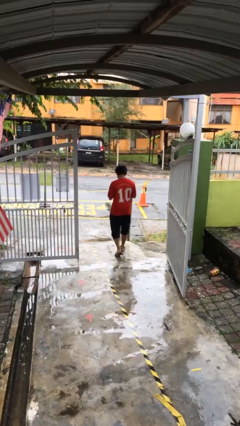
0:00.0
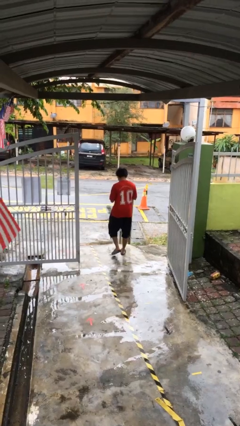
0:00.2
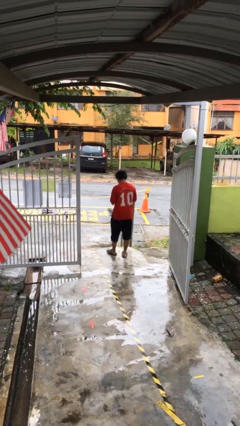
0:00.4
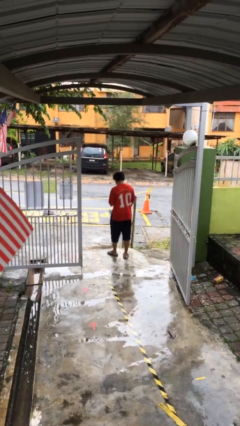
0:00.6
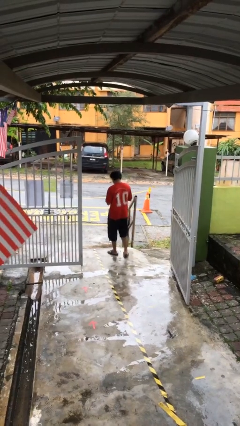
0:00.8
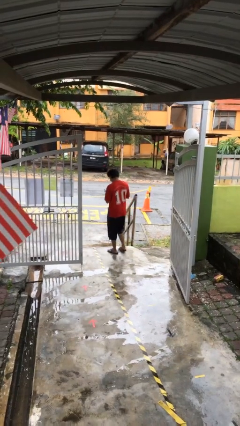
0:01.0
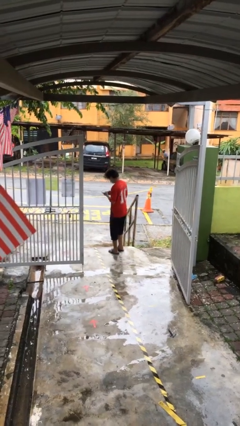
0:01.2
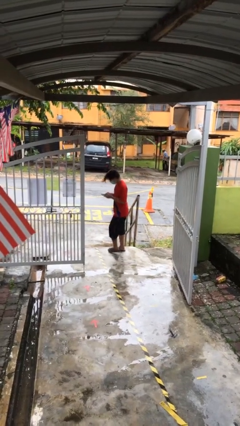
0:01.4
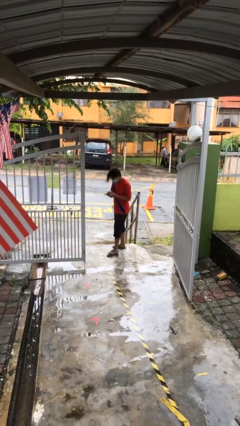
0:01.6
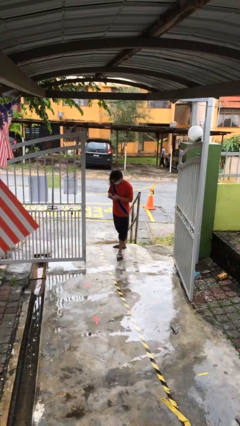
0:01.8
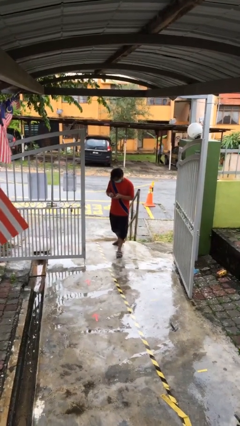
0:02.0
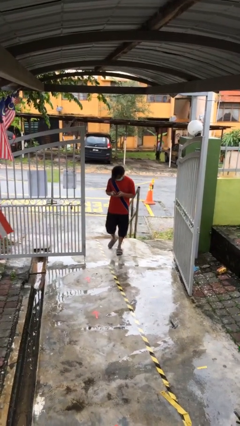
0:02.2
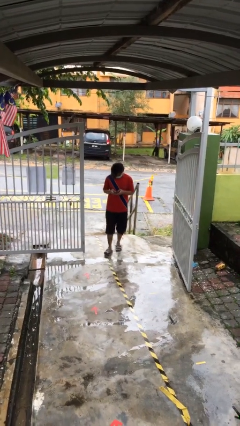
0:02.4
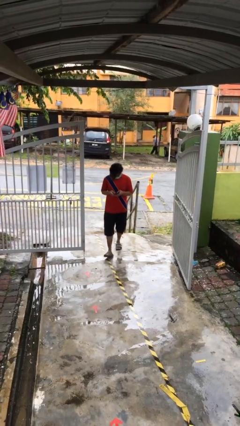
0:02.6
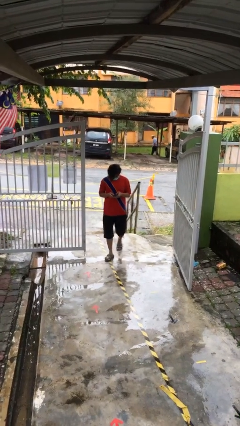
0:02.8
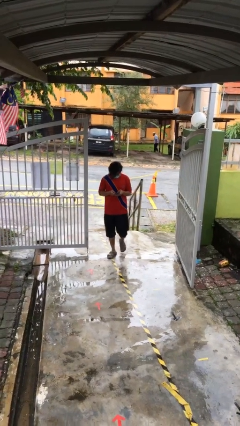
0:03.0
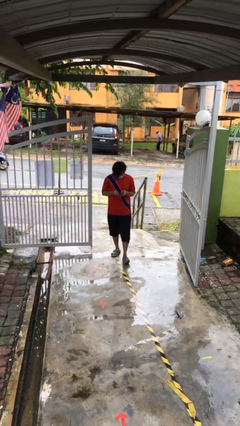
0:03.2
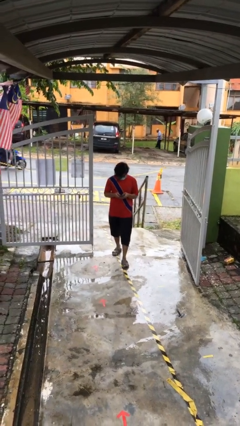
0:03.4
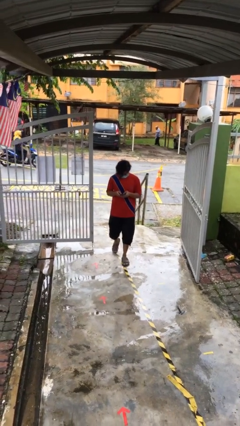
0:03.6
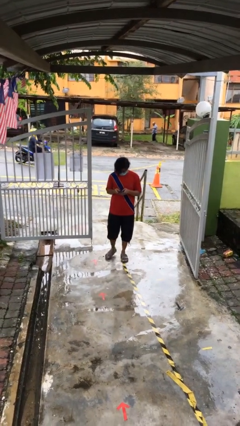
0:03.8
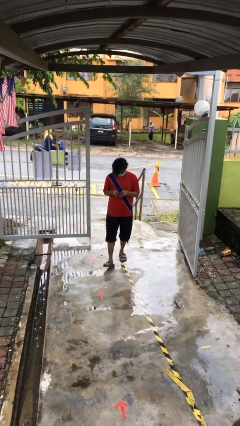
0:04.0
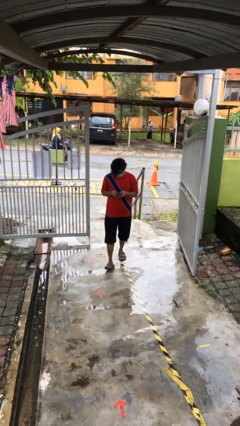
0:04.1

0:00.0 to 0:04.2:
person enters scene through structure

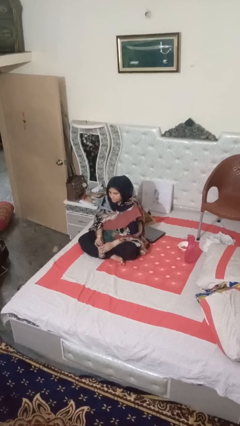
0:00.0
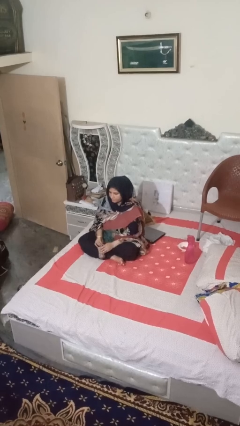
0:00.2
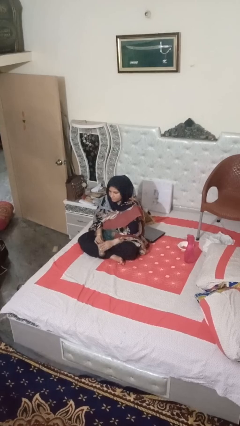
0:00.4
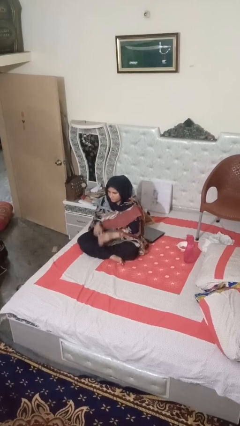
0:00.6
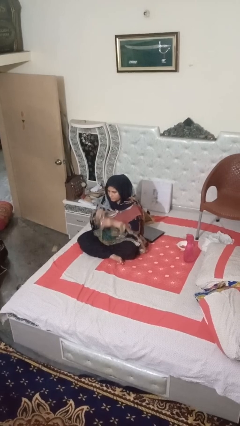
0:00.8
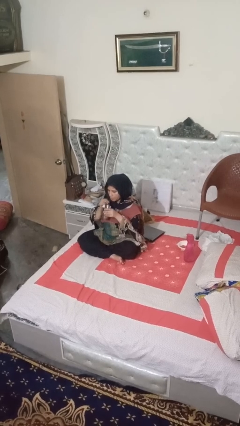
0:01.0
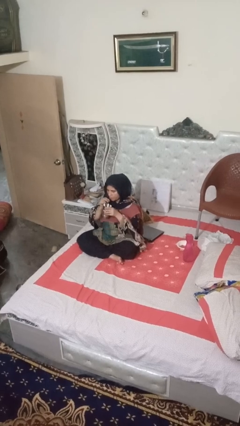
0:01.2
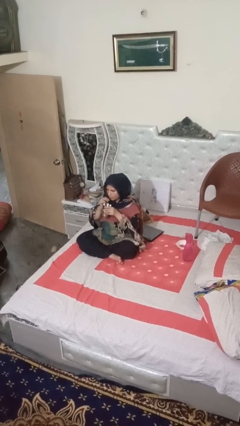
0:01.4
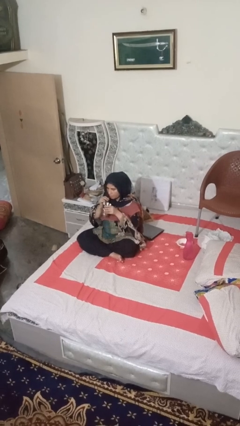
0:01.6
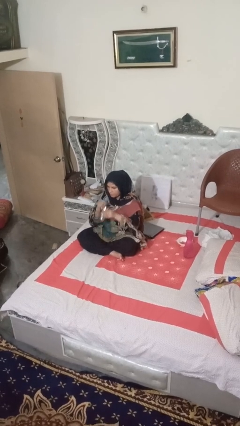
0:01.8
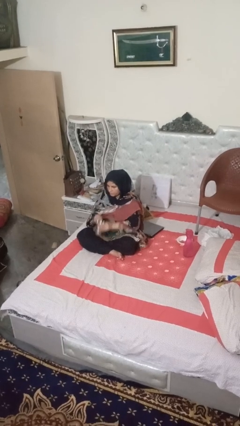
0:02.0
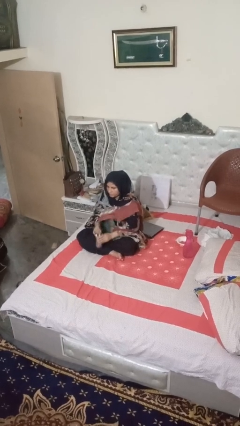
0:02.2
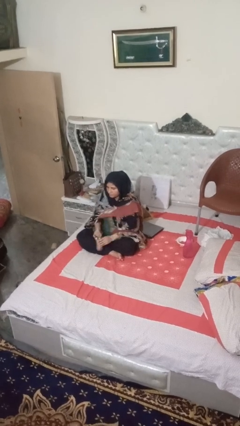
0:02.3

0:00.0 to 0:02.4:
person drinks from straw

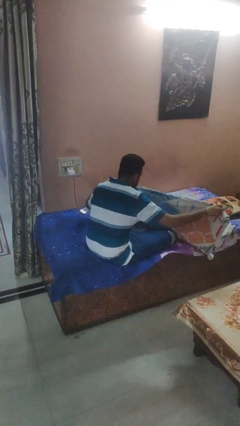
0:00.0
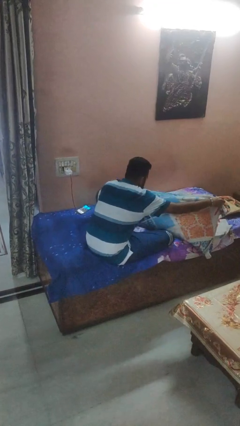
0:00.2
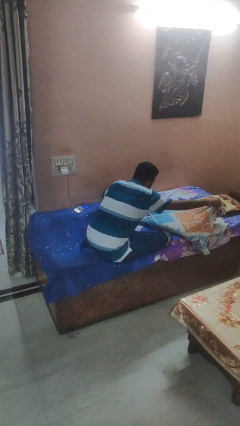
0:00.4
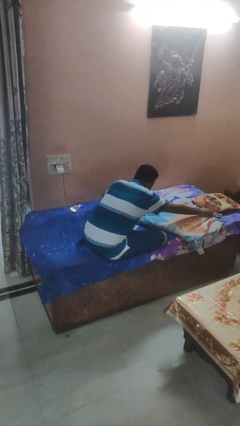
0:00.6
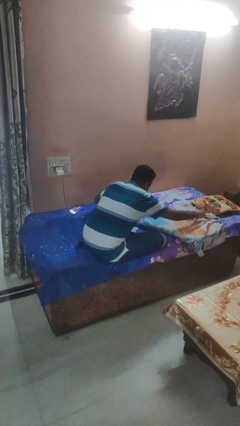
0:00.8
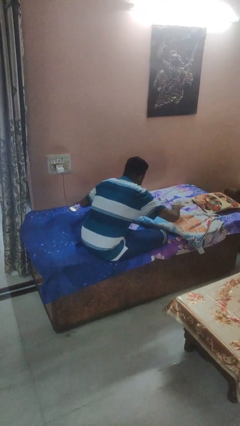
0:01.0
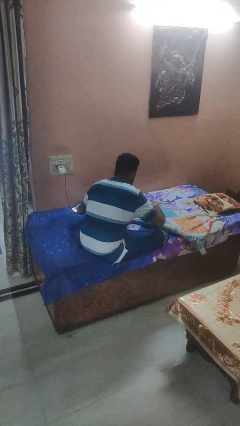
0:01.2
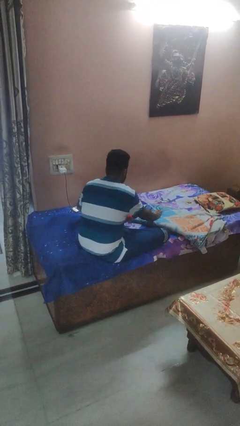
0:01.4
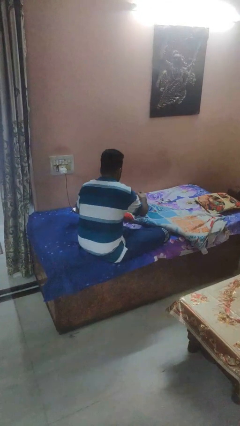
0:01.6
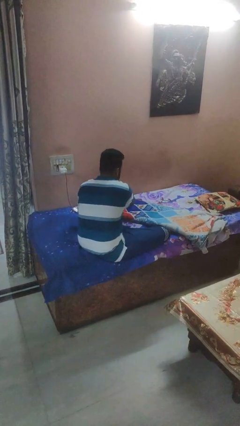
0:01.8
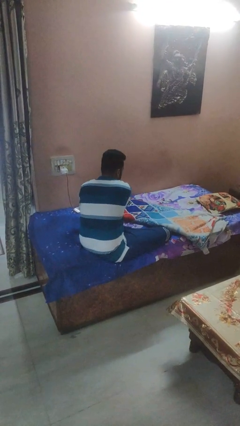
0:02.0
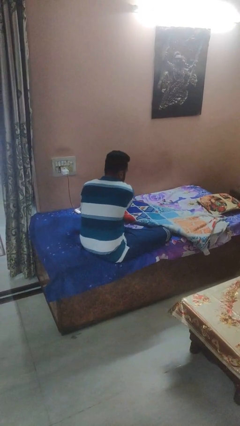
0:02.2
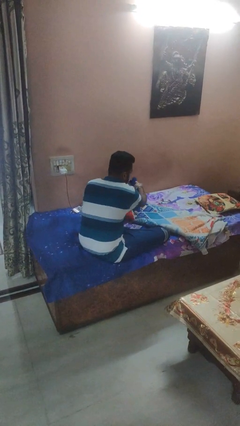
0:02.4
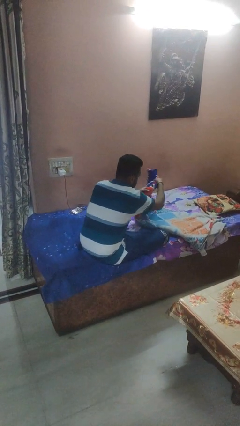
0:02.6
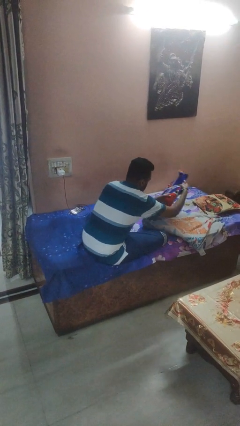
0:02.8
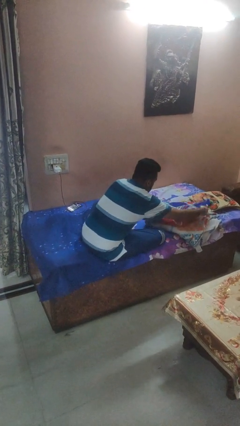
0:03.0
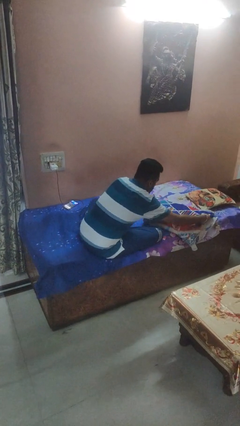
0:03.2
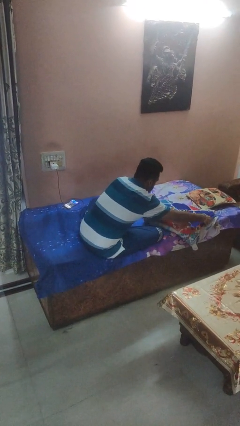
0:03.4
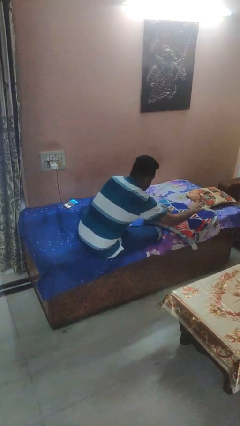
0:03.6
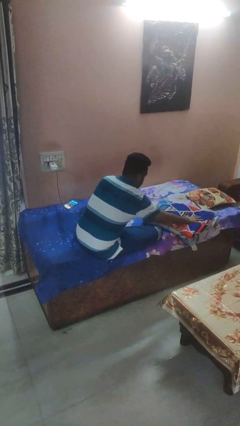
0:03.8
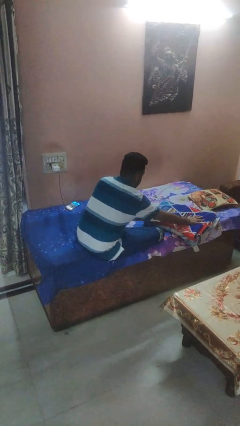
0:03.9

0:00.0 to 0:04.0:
person folds blanket

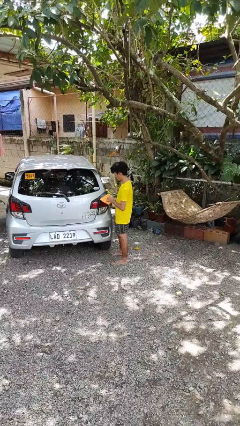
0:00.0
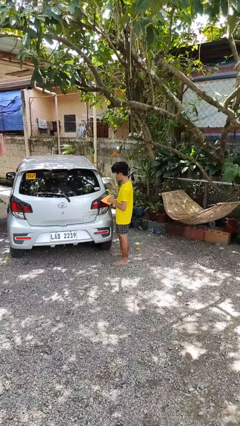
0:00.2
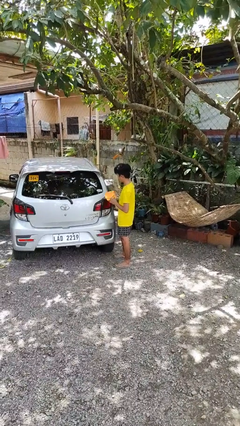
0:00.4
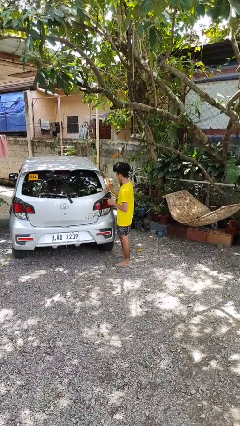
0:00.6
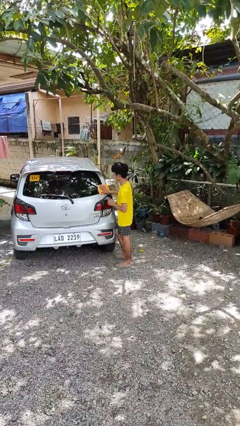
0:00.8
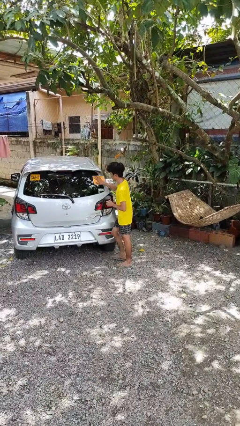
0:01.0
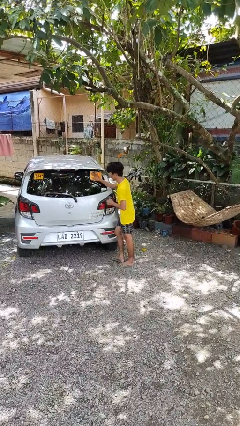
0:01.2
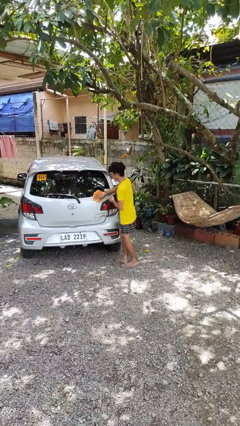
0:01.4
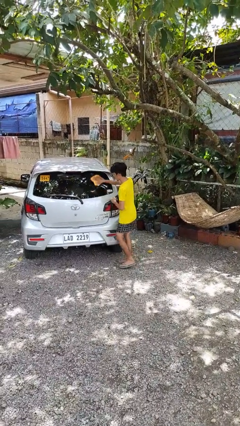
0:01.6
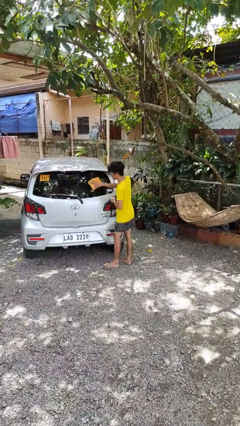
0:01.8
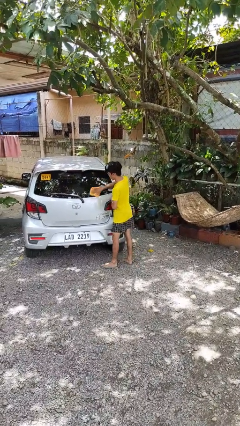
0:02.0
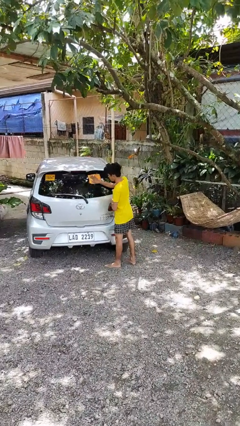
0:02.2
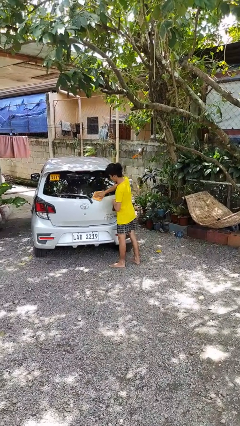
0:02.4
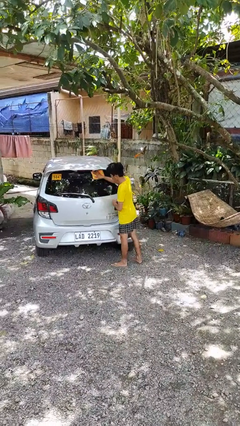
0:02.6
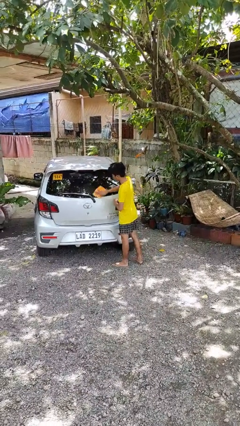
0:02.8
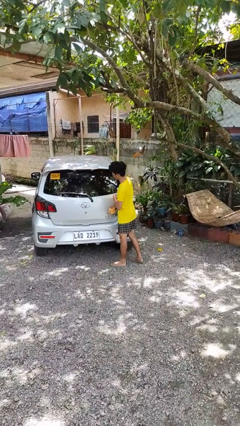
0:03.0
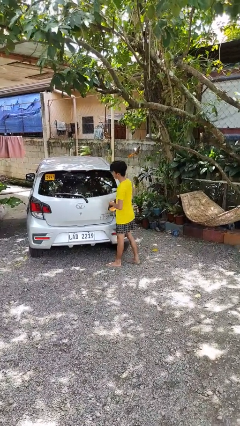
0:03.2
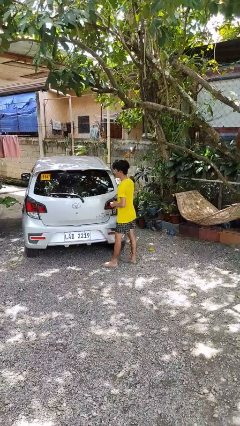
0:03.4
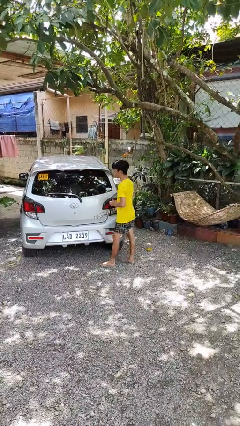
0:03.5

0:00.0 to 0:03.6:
person polishes car with rag

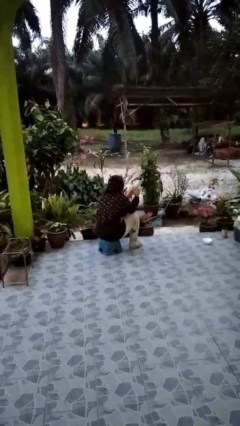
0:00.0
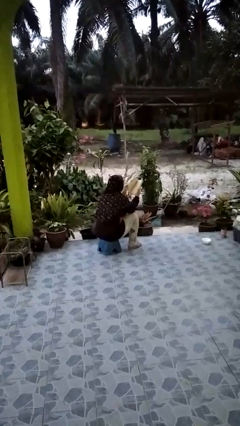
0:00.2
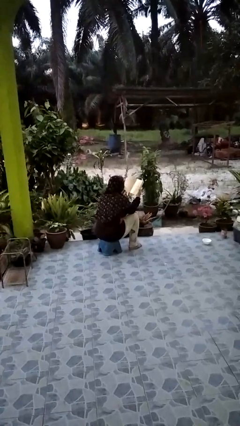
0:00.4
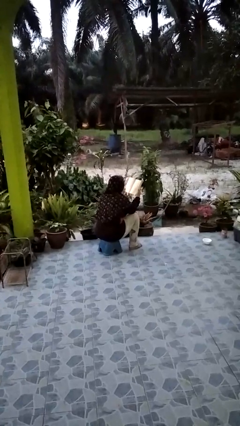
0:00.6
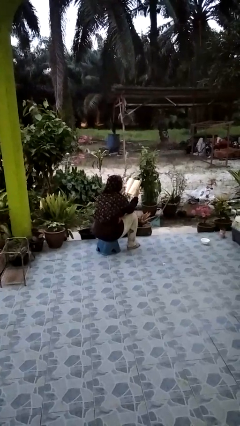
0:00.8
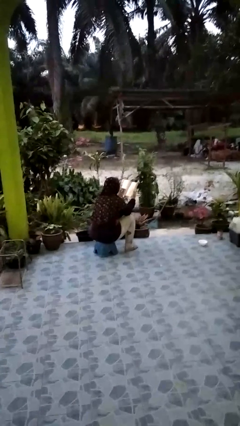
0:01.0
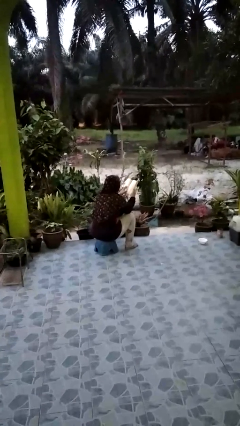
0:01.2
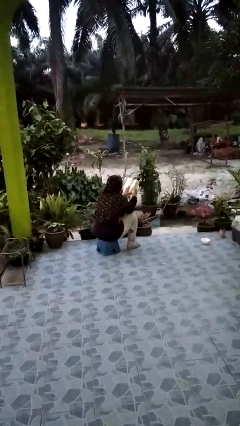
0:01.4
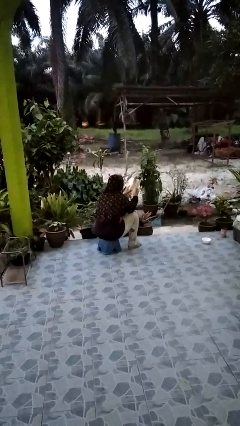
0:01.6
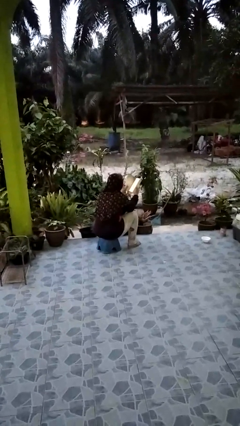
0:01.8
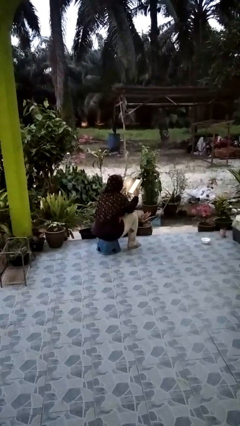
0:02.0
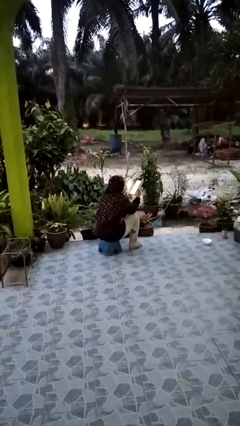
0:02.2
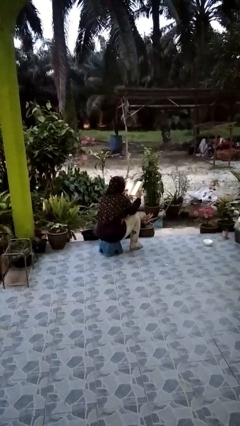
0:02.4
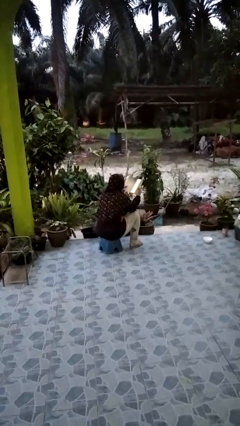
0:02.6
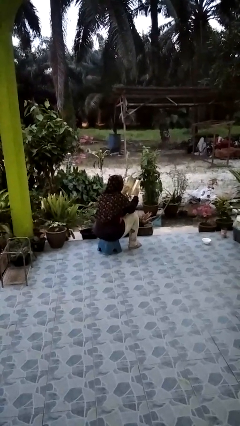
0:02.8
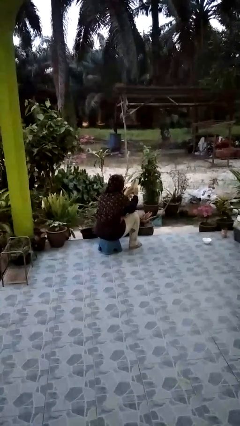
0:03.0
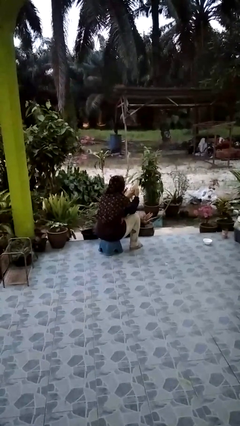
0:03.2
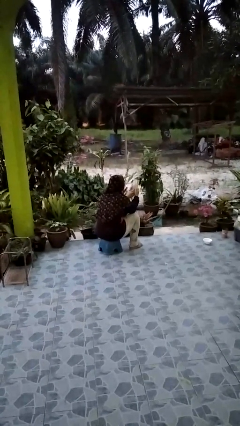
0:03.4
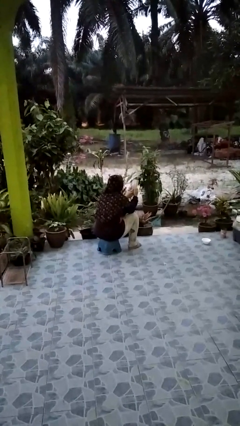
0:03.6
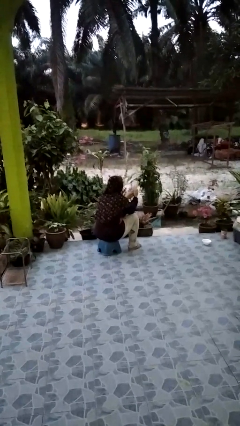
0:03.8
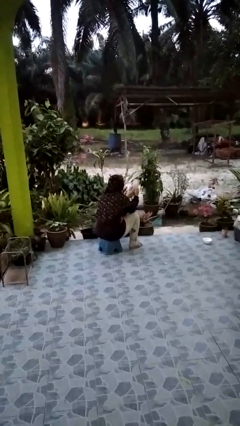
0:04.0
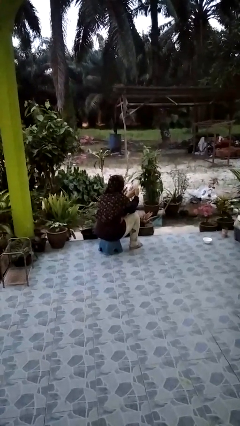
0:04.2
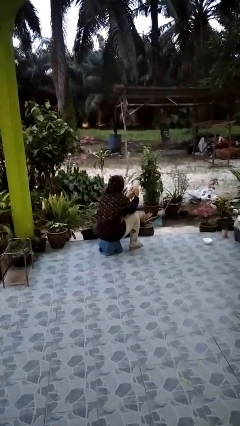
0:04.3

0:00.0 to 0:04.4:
person reads book
